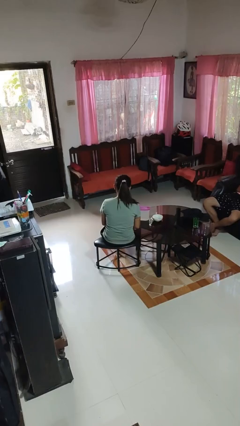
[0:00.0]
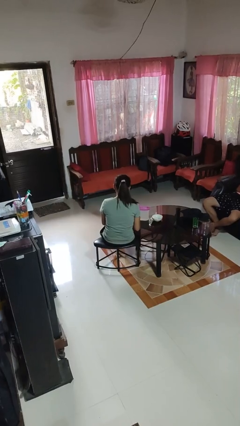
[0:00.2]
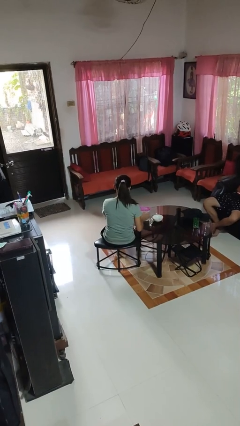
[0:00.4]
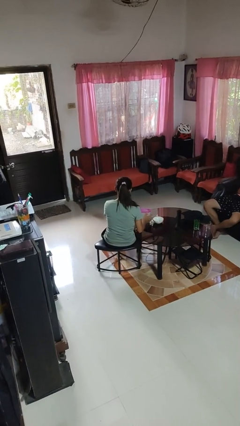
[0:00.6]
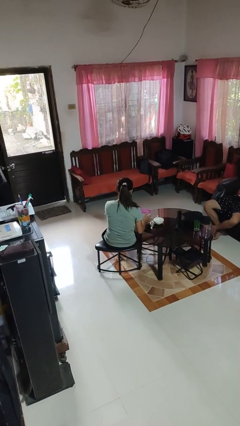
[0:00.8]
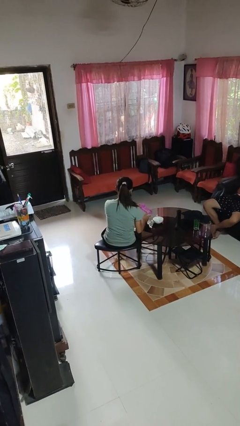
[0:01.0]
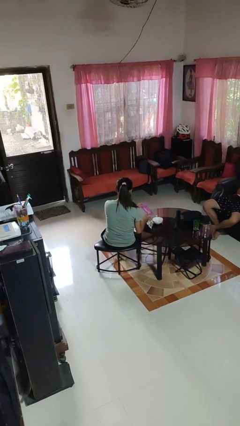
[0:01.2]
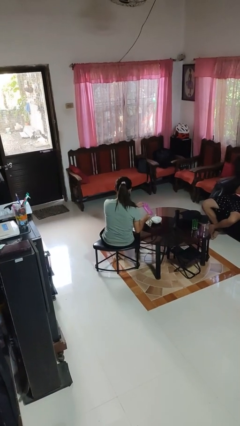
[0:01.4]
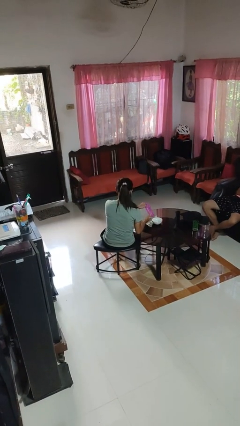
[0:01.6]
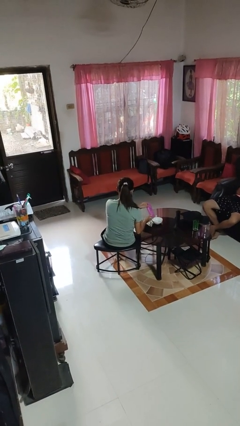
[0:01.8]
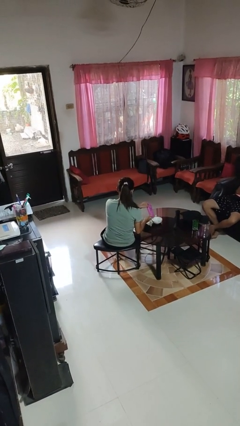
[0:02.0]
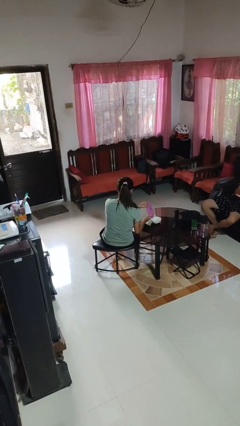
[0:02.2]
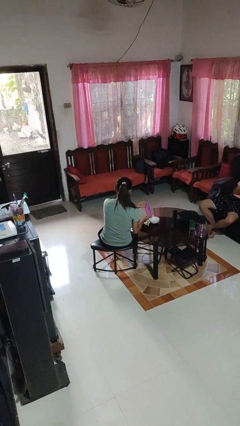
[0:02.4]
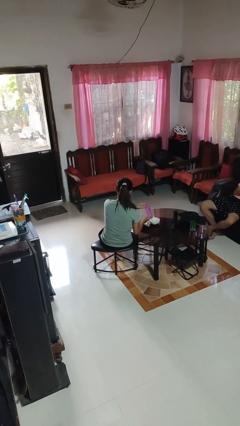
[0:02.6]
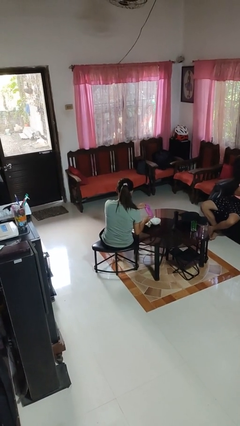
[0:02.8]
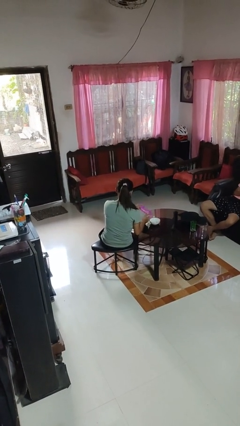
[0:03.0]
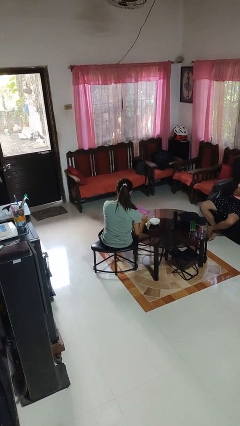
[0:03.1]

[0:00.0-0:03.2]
person pours into bowl

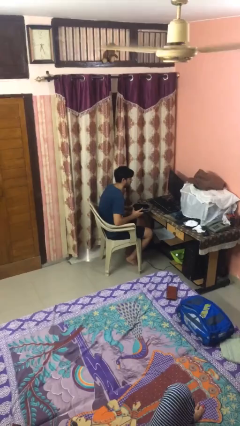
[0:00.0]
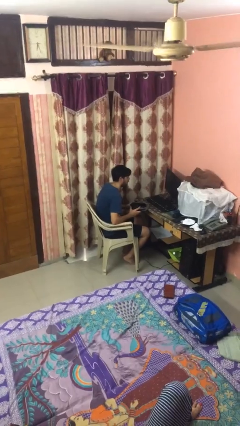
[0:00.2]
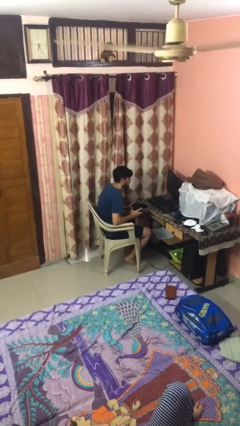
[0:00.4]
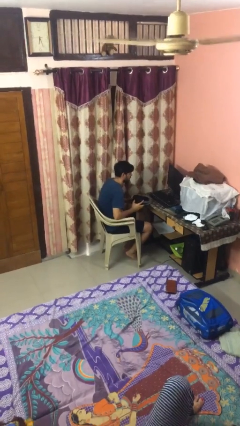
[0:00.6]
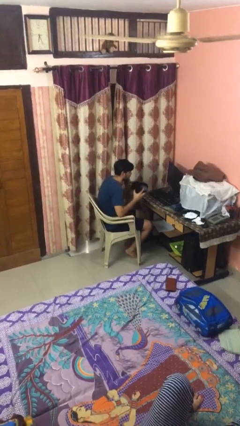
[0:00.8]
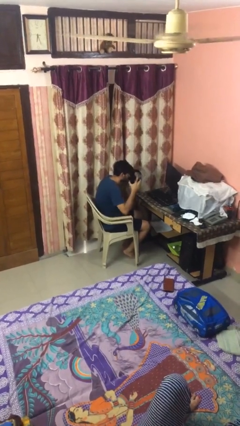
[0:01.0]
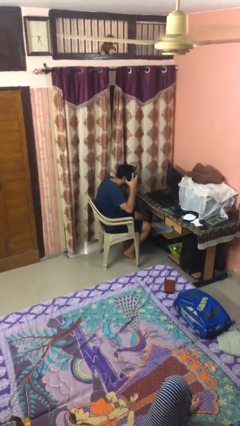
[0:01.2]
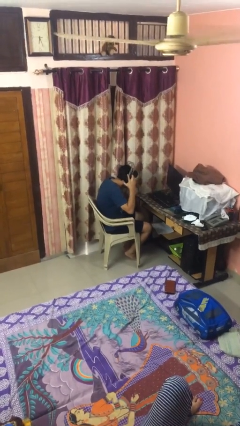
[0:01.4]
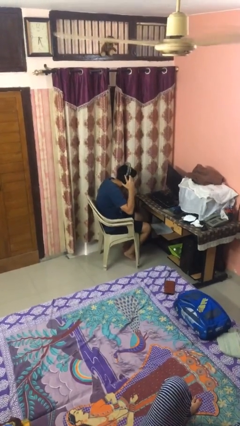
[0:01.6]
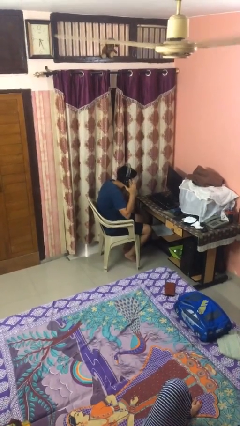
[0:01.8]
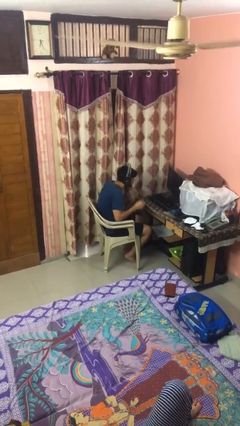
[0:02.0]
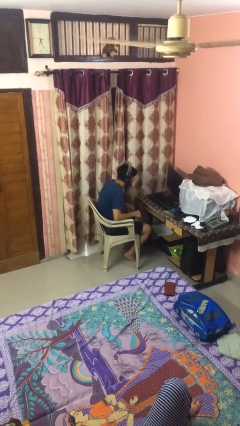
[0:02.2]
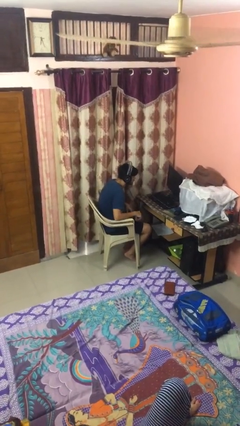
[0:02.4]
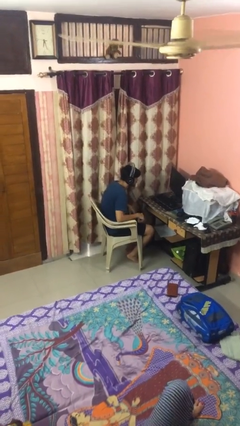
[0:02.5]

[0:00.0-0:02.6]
person puts on headphones

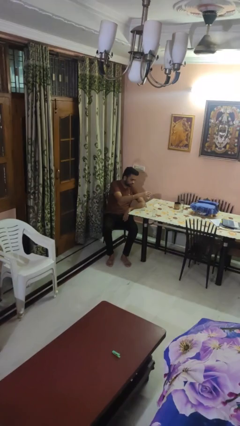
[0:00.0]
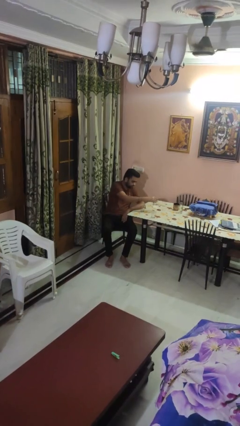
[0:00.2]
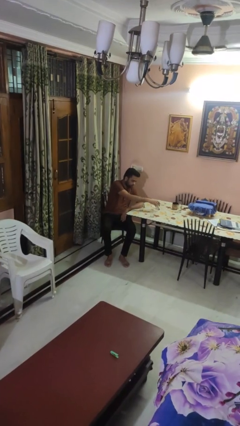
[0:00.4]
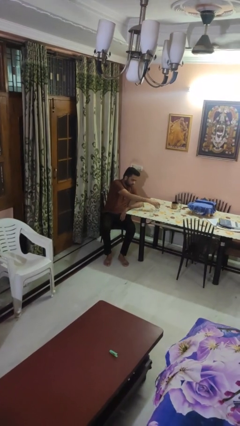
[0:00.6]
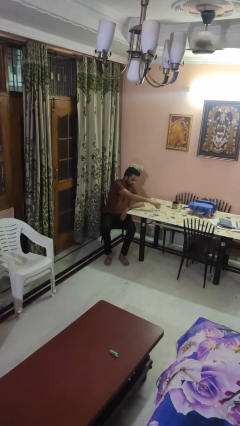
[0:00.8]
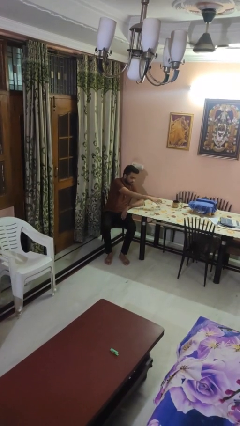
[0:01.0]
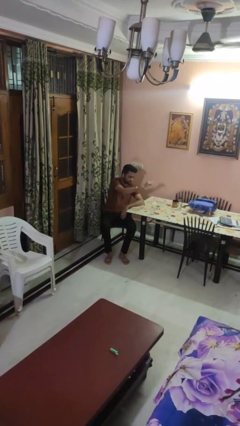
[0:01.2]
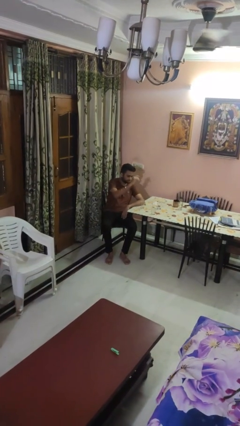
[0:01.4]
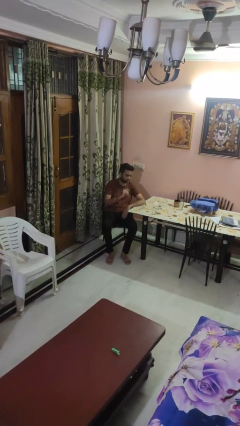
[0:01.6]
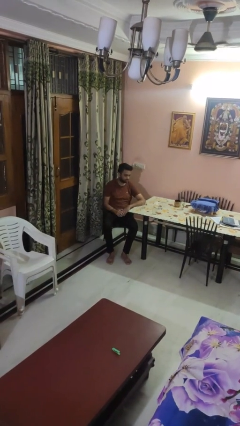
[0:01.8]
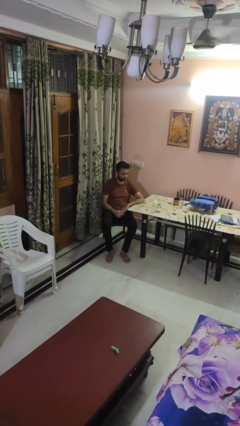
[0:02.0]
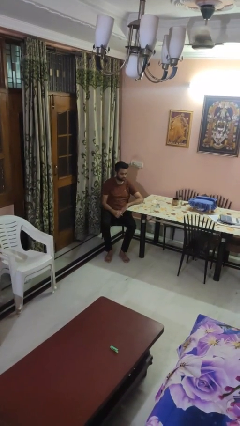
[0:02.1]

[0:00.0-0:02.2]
person puts down object on table

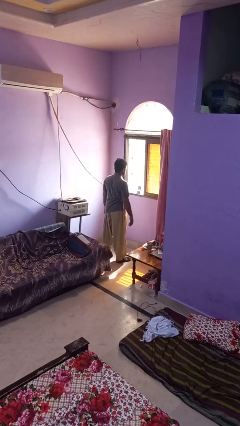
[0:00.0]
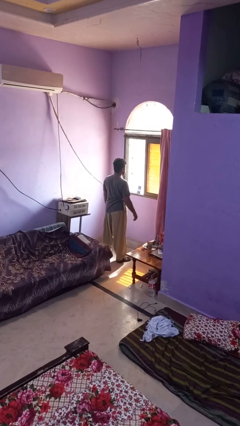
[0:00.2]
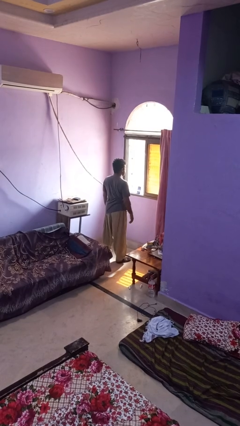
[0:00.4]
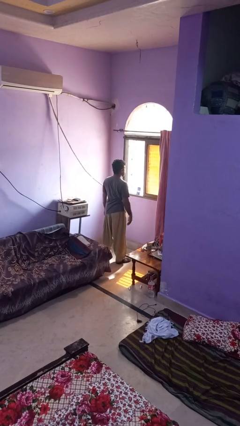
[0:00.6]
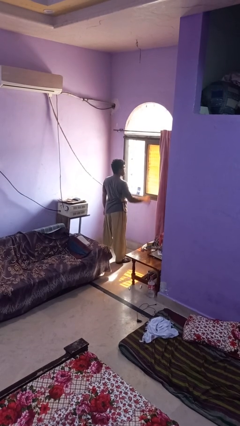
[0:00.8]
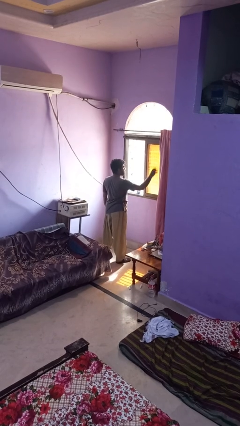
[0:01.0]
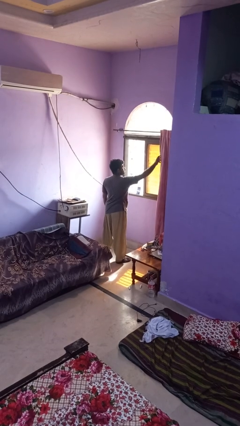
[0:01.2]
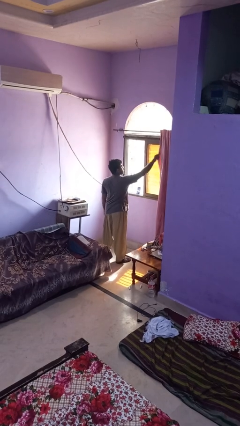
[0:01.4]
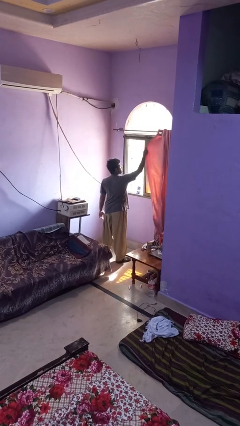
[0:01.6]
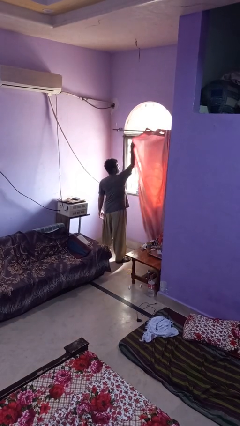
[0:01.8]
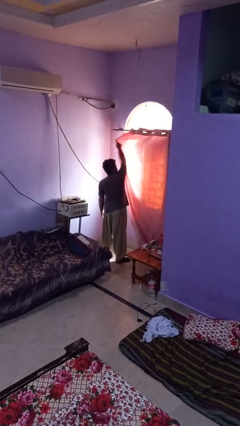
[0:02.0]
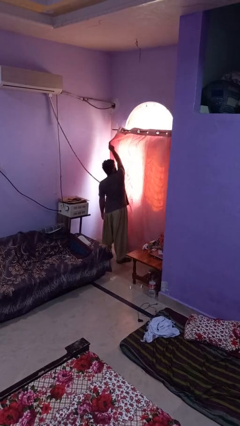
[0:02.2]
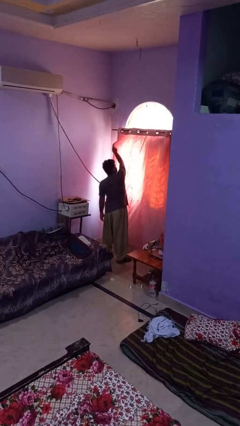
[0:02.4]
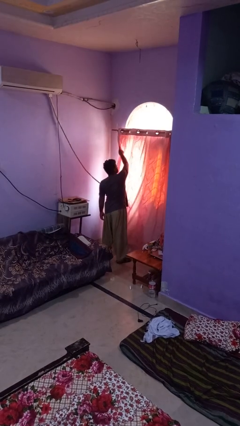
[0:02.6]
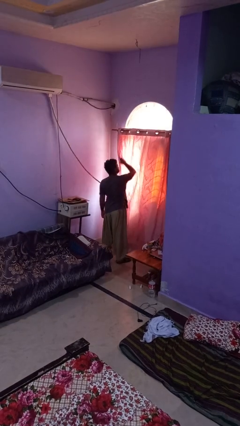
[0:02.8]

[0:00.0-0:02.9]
person closes curtains

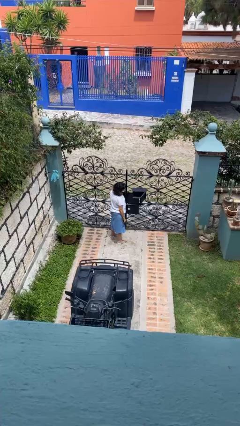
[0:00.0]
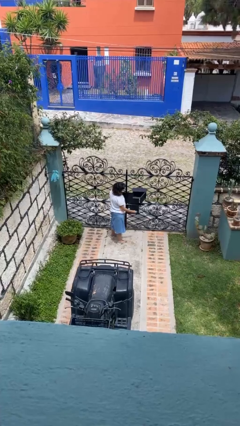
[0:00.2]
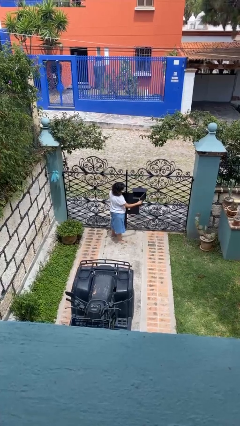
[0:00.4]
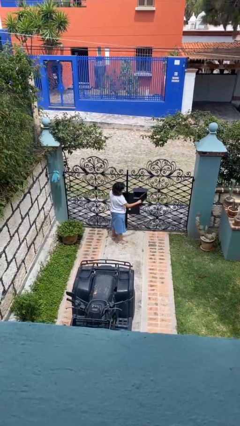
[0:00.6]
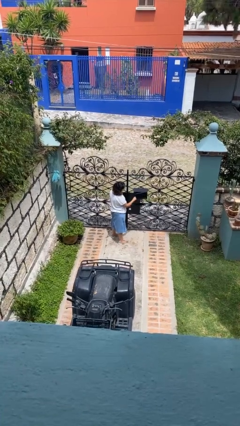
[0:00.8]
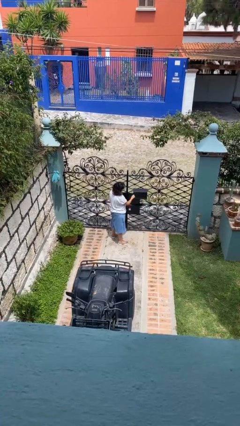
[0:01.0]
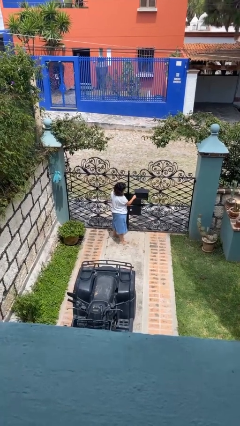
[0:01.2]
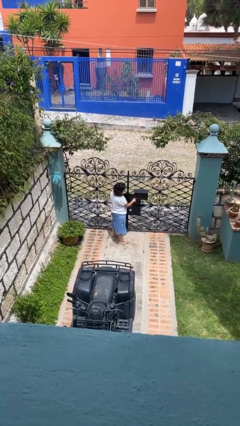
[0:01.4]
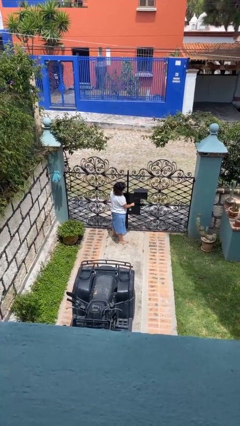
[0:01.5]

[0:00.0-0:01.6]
person closes mailbox

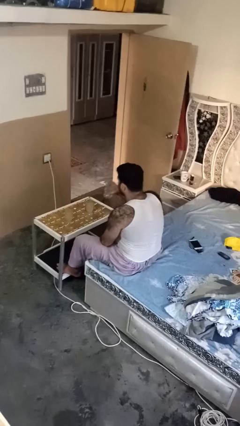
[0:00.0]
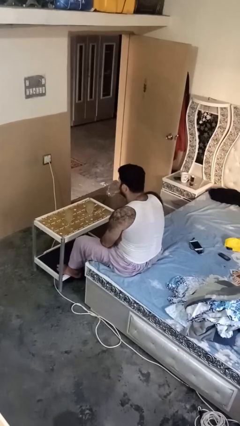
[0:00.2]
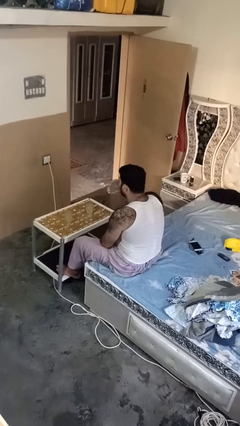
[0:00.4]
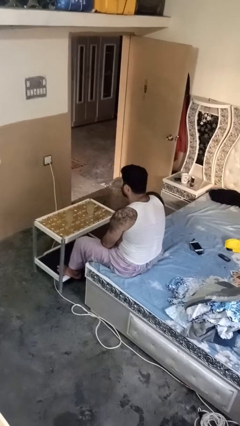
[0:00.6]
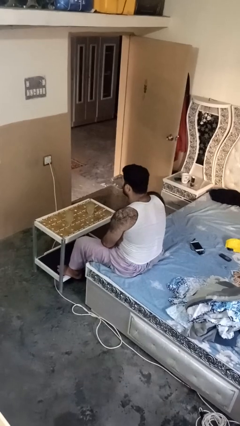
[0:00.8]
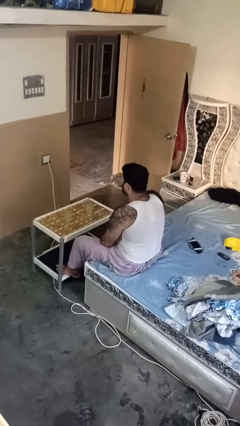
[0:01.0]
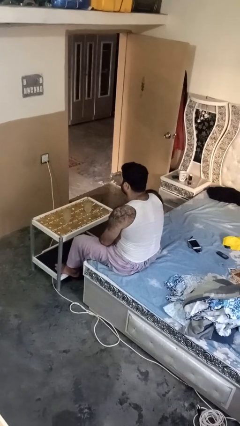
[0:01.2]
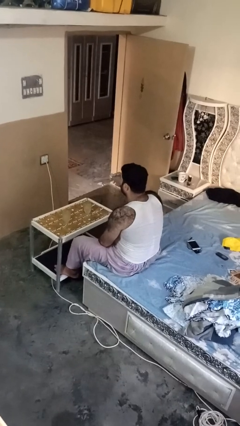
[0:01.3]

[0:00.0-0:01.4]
person drinks from shotglass

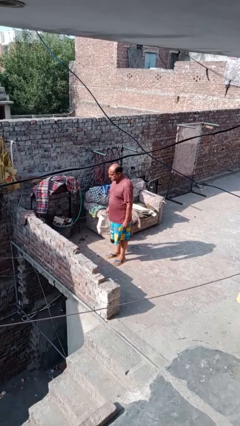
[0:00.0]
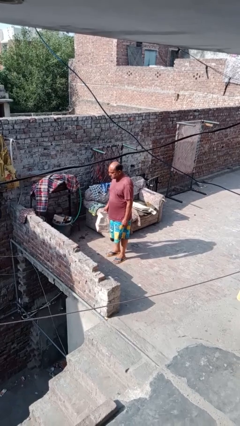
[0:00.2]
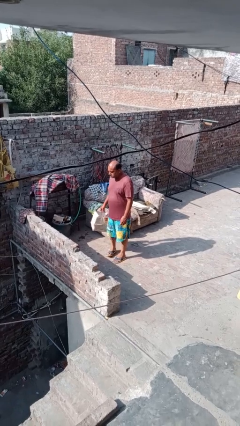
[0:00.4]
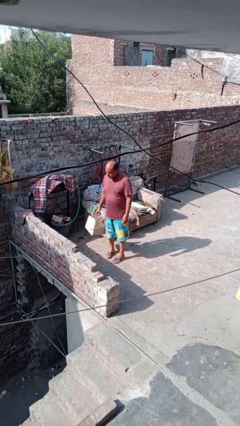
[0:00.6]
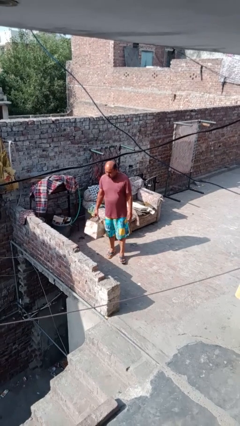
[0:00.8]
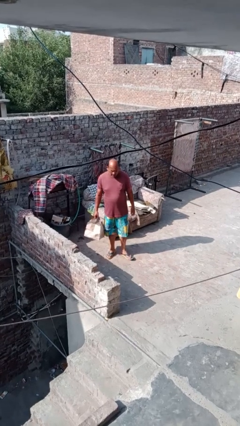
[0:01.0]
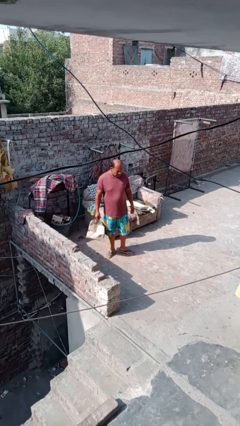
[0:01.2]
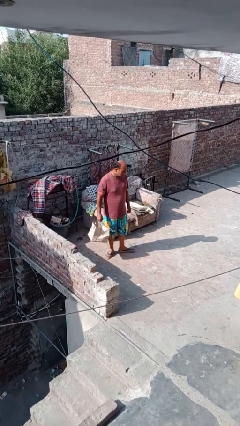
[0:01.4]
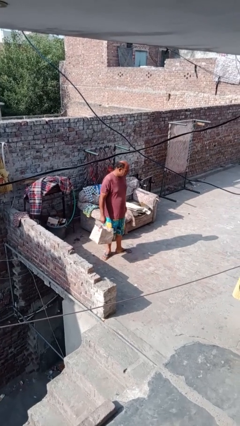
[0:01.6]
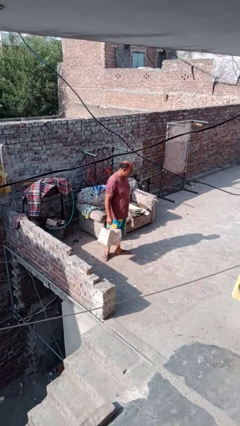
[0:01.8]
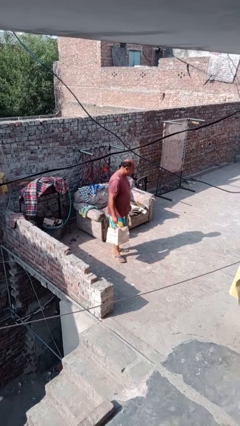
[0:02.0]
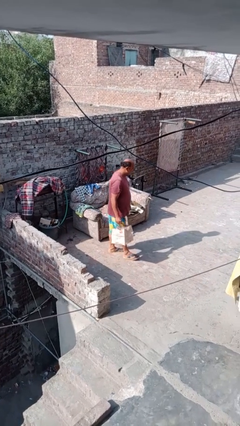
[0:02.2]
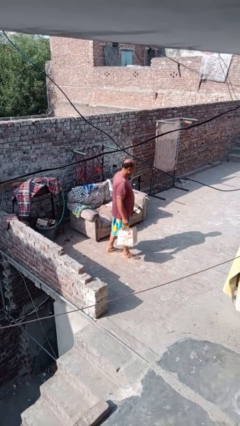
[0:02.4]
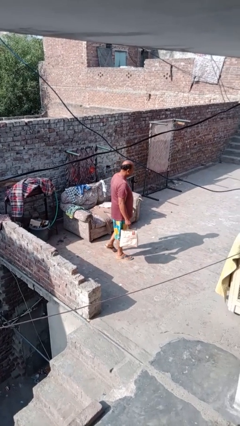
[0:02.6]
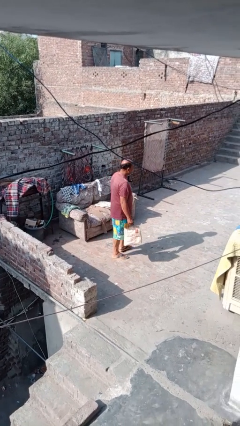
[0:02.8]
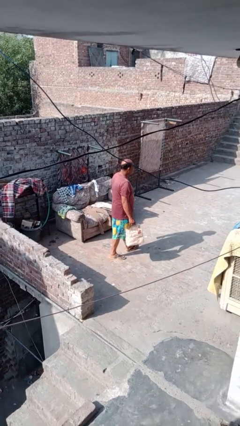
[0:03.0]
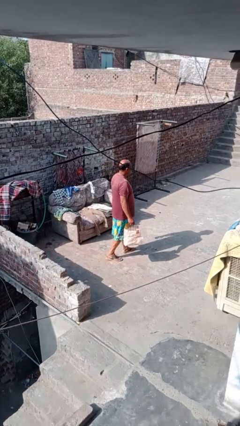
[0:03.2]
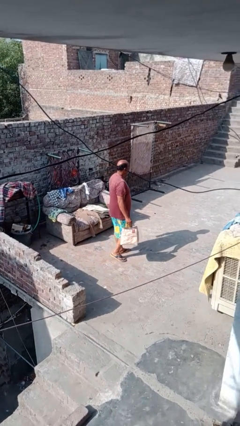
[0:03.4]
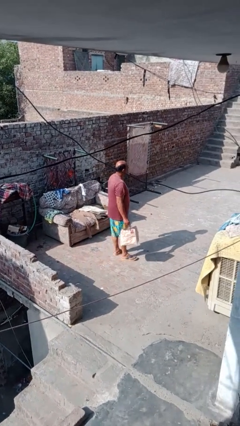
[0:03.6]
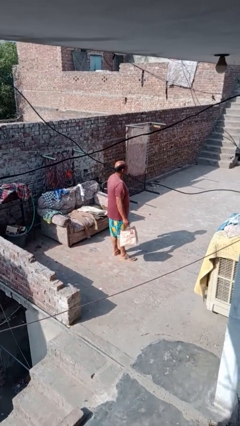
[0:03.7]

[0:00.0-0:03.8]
person carries groceries
